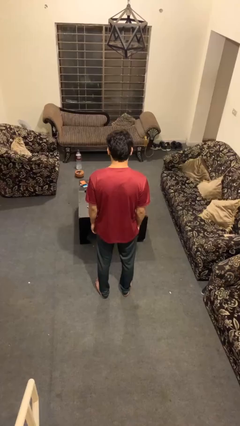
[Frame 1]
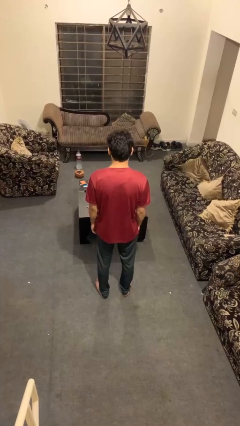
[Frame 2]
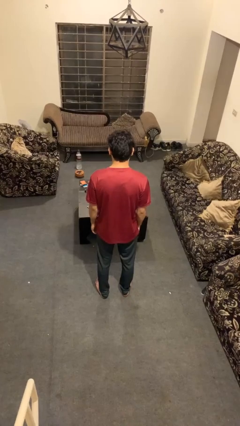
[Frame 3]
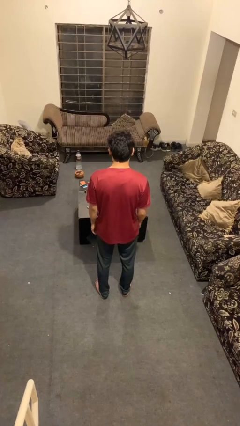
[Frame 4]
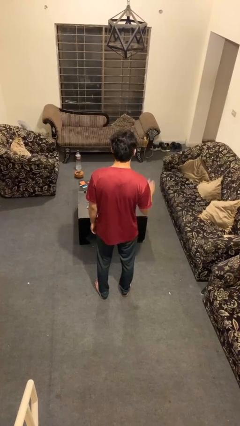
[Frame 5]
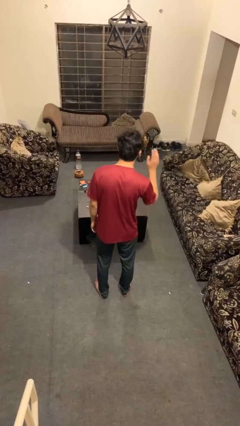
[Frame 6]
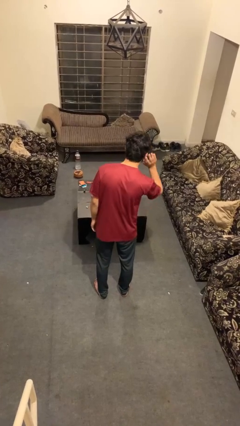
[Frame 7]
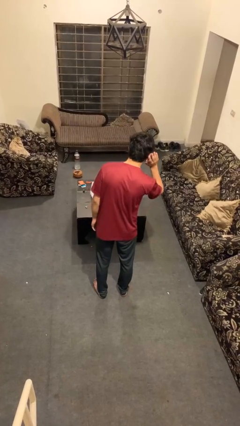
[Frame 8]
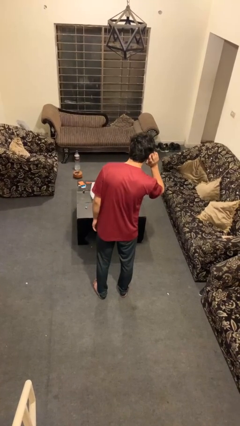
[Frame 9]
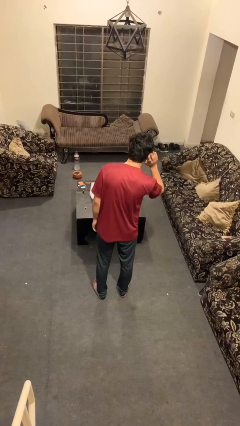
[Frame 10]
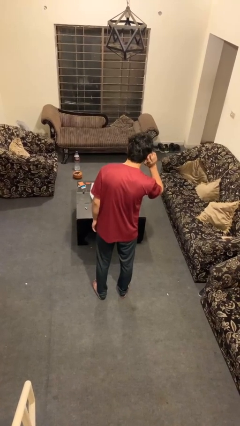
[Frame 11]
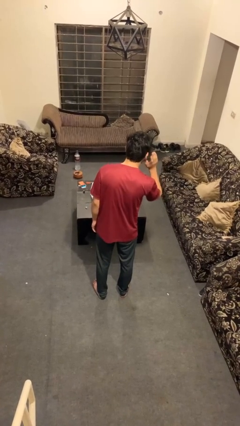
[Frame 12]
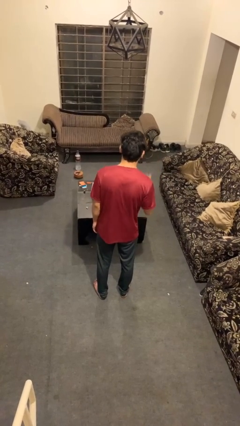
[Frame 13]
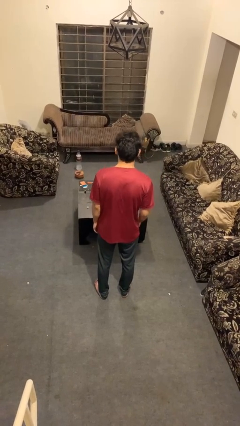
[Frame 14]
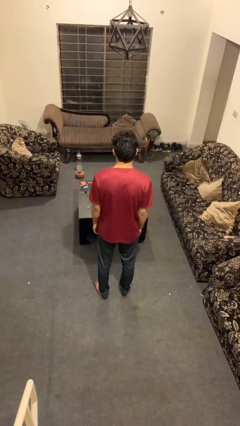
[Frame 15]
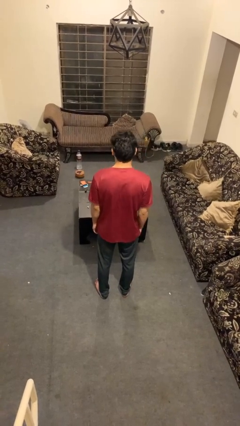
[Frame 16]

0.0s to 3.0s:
person gestures listen closely

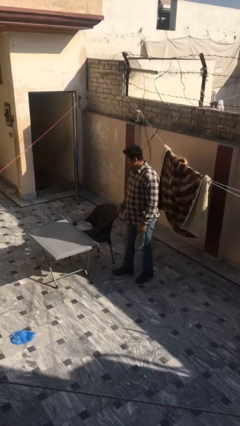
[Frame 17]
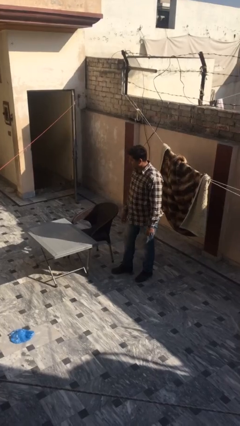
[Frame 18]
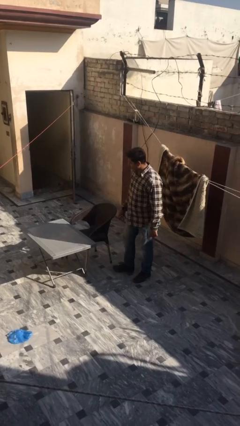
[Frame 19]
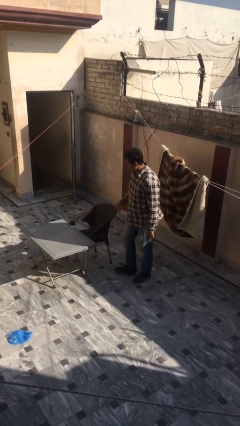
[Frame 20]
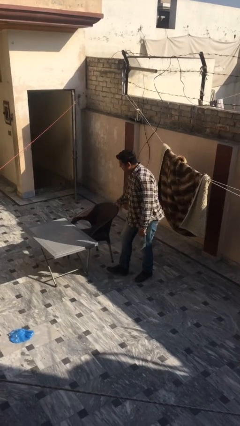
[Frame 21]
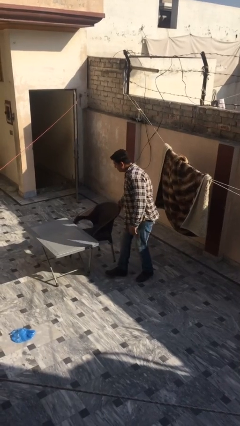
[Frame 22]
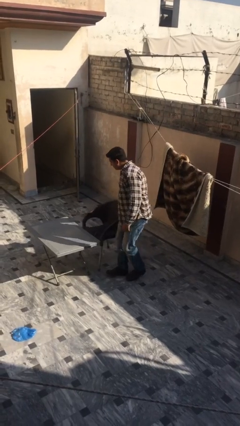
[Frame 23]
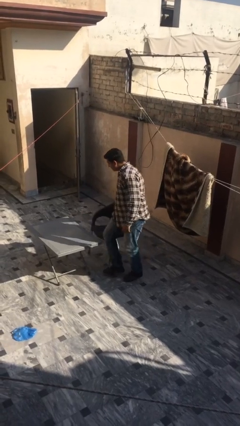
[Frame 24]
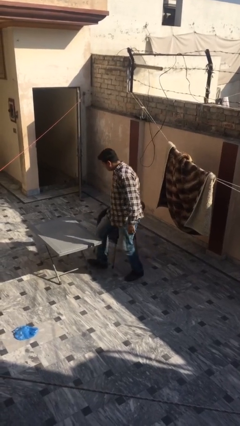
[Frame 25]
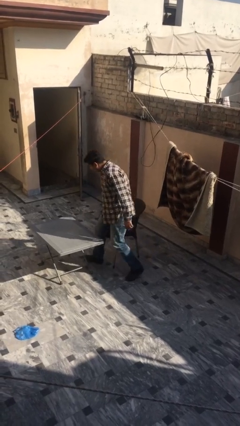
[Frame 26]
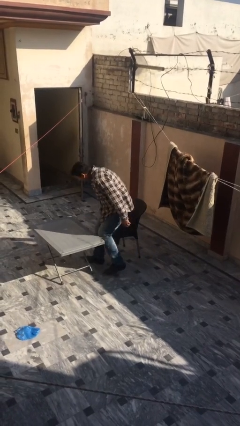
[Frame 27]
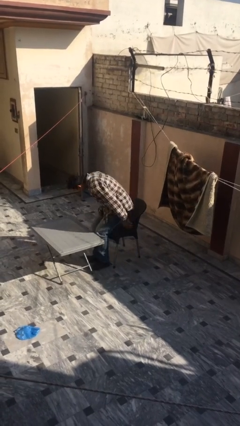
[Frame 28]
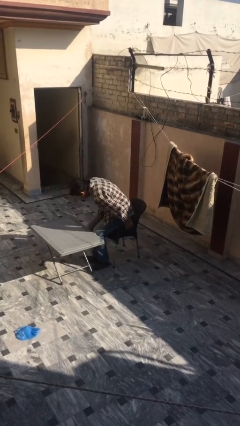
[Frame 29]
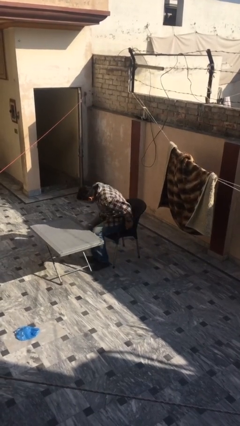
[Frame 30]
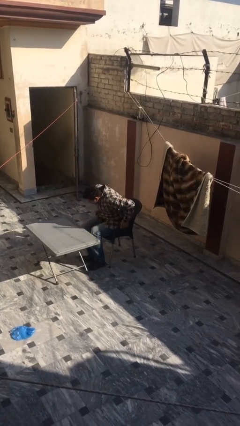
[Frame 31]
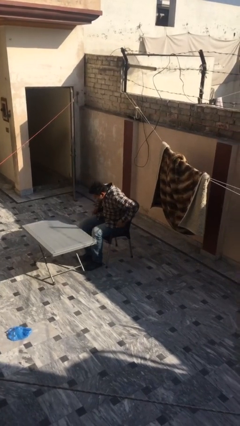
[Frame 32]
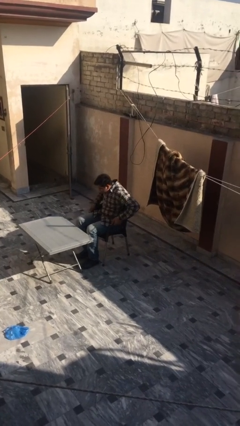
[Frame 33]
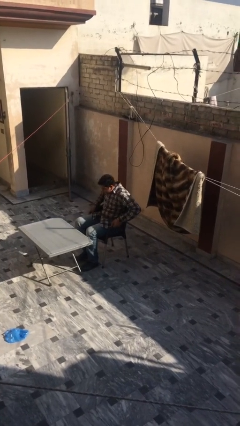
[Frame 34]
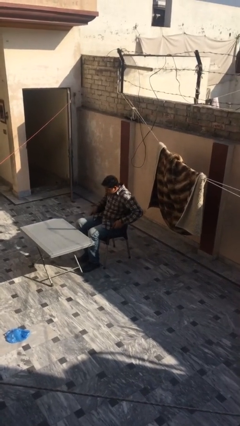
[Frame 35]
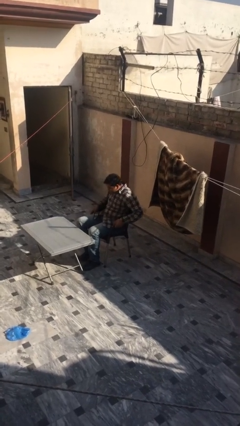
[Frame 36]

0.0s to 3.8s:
person sits down

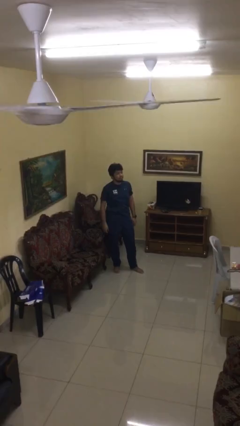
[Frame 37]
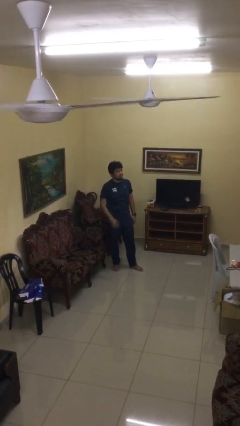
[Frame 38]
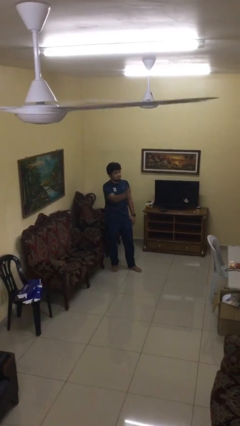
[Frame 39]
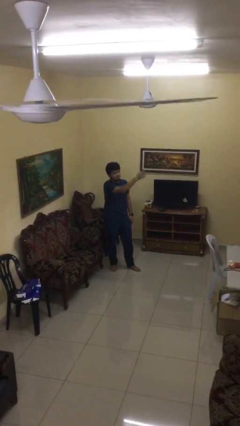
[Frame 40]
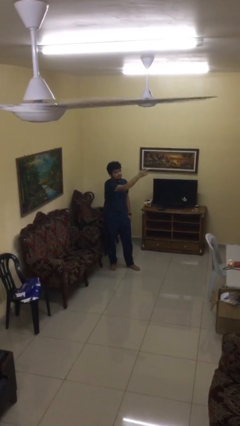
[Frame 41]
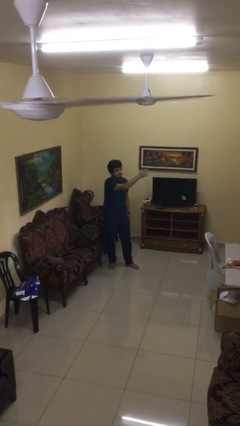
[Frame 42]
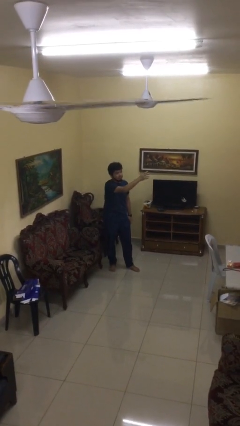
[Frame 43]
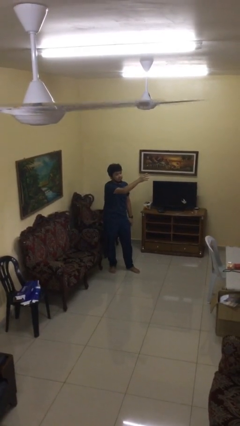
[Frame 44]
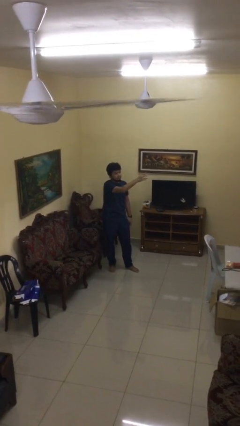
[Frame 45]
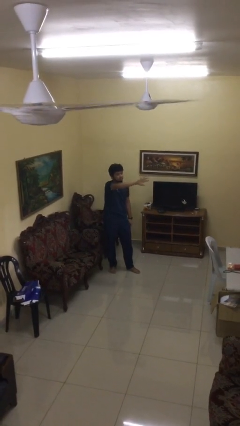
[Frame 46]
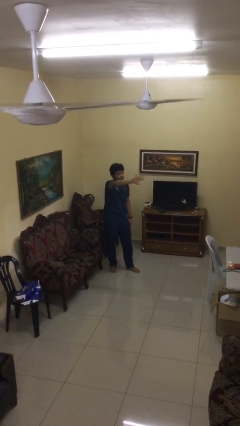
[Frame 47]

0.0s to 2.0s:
person gestures swipe left

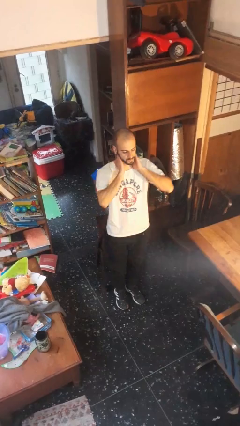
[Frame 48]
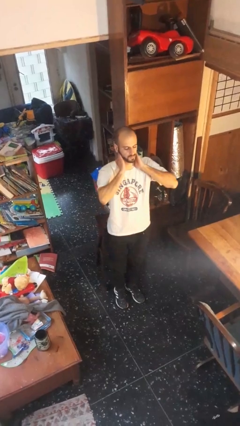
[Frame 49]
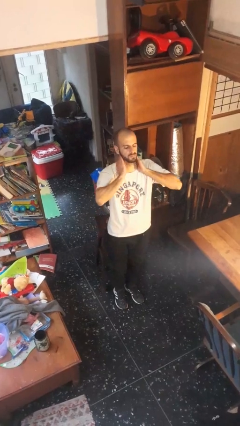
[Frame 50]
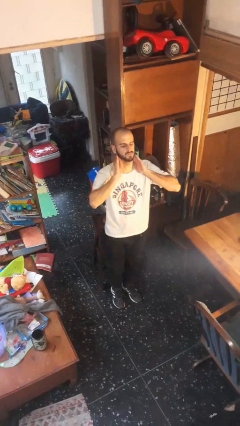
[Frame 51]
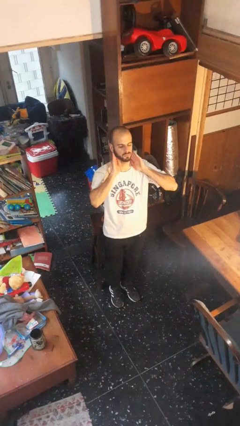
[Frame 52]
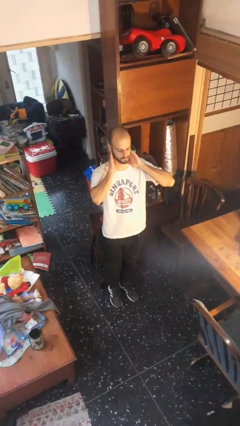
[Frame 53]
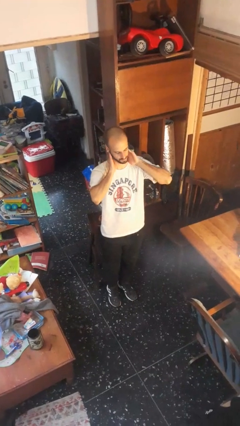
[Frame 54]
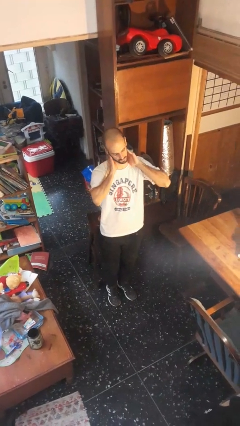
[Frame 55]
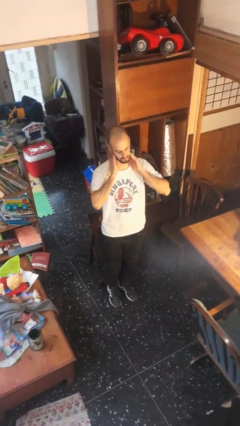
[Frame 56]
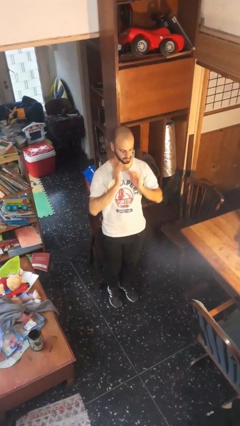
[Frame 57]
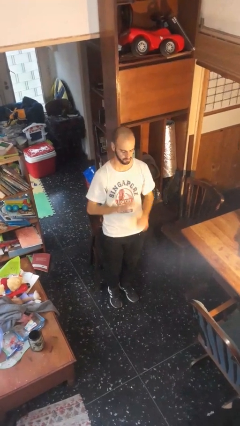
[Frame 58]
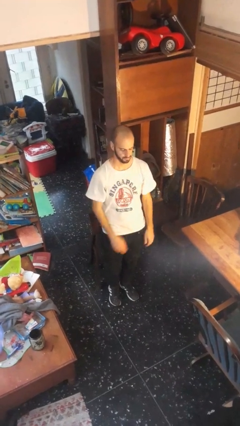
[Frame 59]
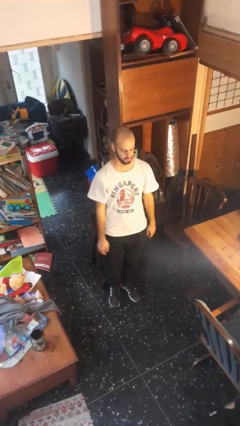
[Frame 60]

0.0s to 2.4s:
person rubs neck

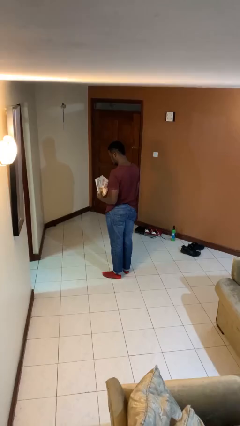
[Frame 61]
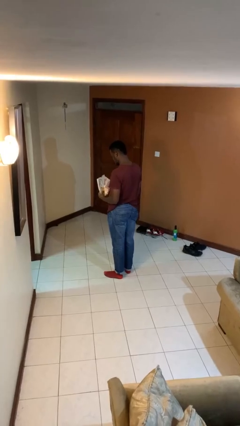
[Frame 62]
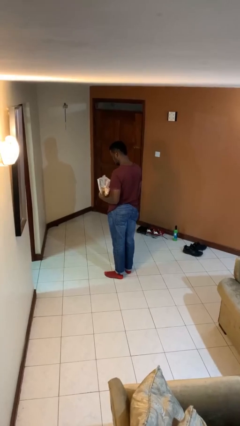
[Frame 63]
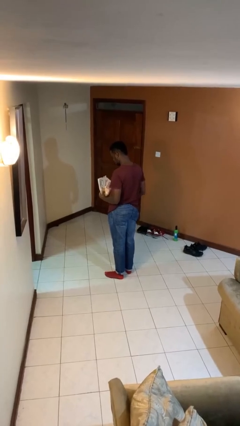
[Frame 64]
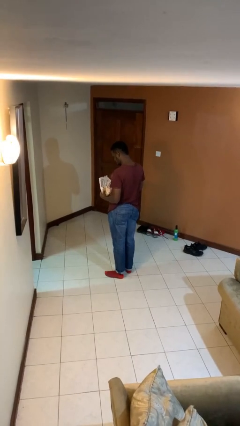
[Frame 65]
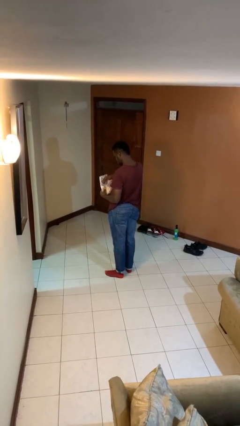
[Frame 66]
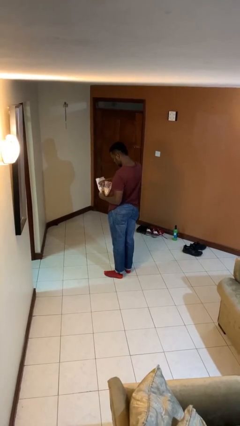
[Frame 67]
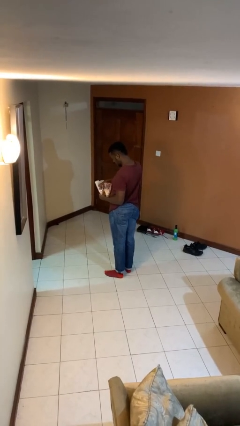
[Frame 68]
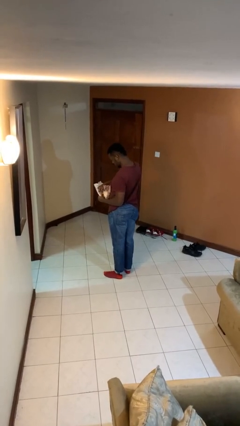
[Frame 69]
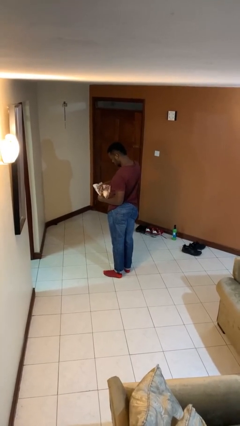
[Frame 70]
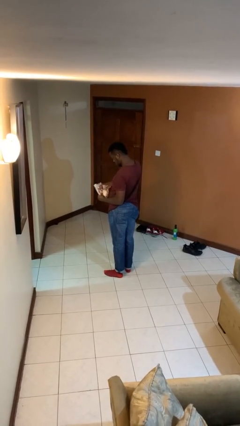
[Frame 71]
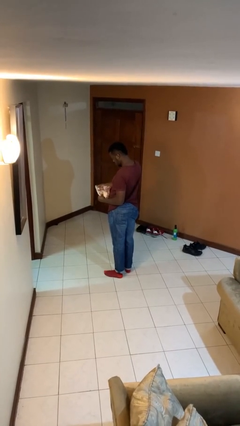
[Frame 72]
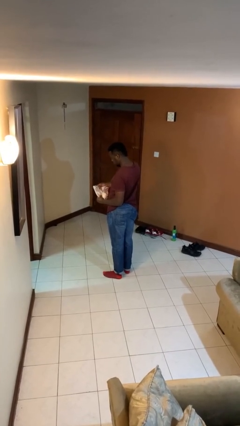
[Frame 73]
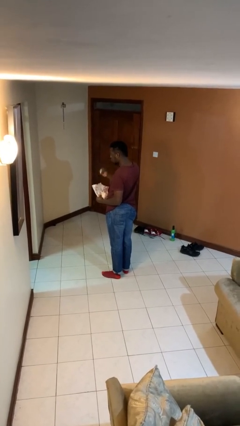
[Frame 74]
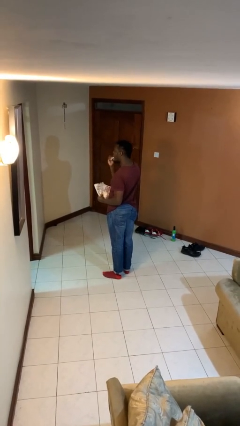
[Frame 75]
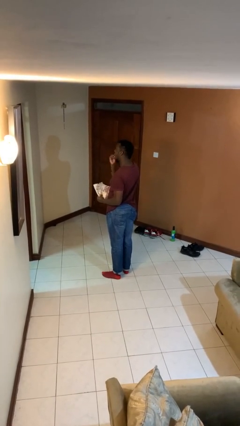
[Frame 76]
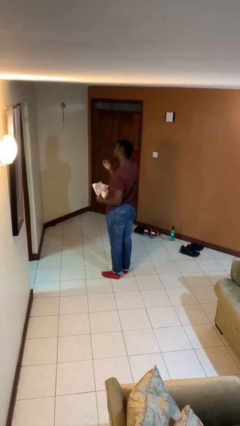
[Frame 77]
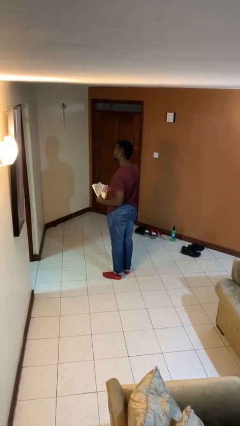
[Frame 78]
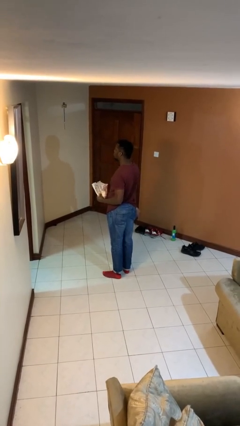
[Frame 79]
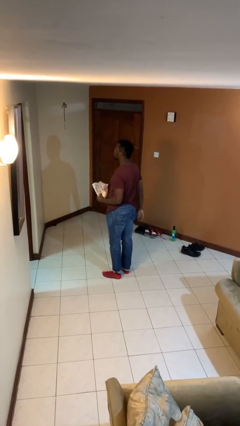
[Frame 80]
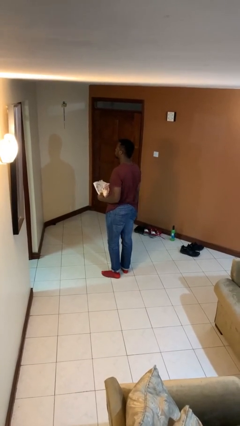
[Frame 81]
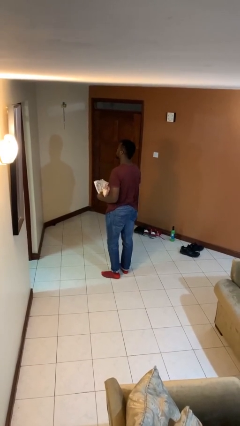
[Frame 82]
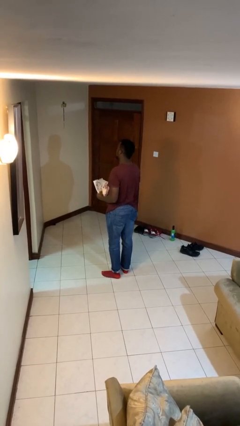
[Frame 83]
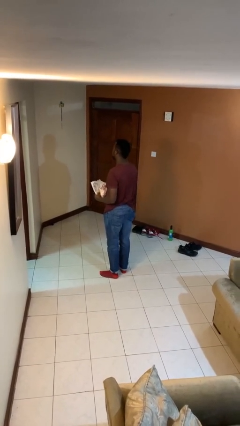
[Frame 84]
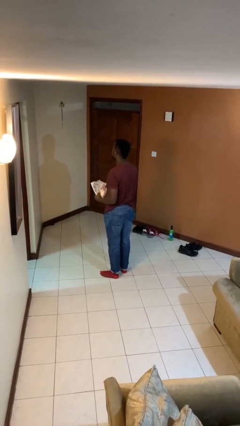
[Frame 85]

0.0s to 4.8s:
person eats snack from bag

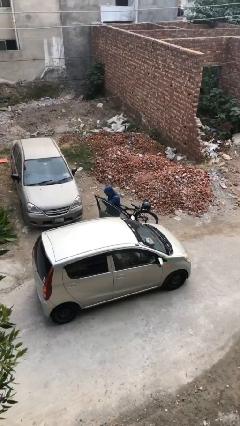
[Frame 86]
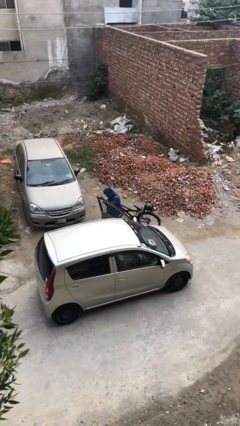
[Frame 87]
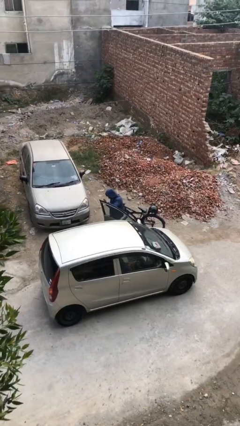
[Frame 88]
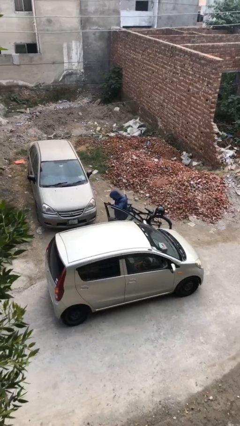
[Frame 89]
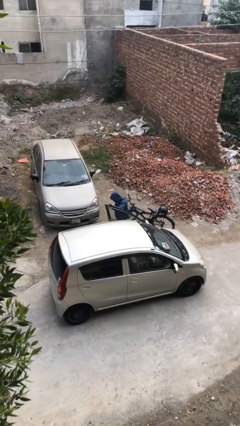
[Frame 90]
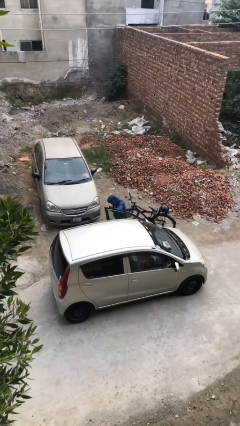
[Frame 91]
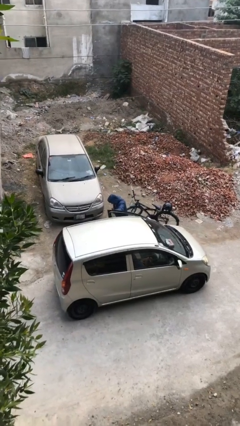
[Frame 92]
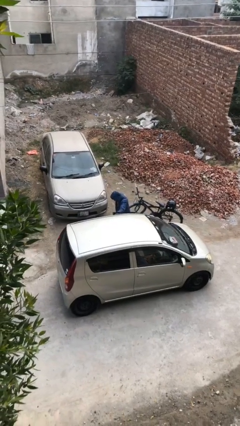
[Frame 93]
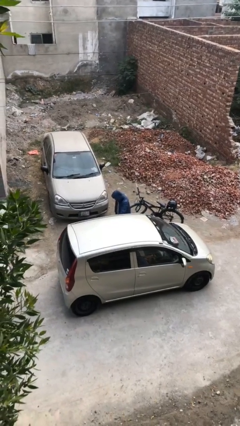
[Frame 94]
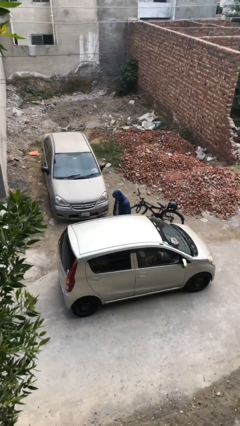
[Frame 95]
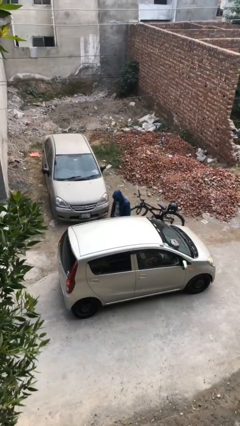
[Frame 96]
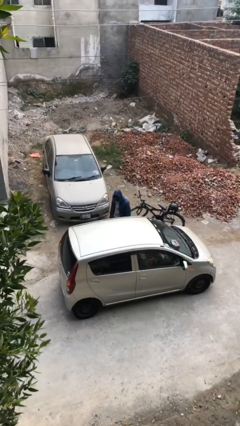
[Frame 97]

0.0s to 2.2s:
person closes car door
